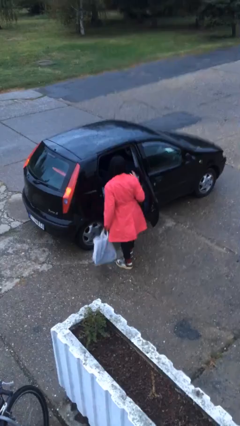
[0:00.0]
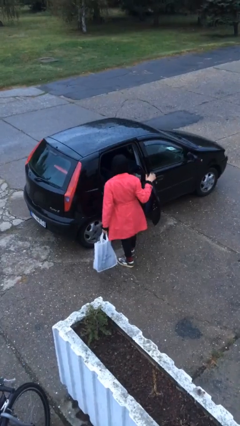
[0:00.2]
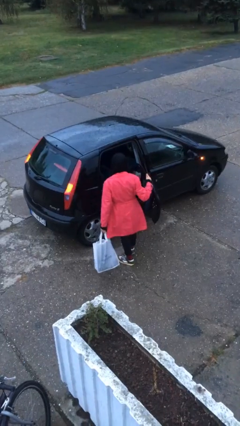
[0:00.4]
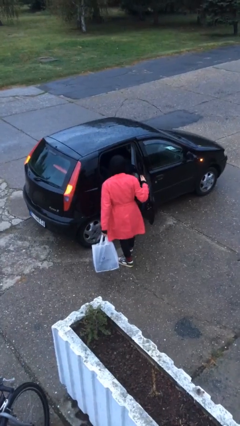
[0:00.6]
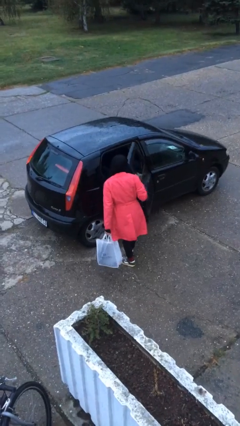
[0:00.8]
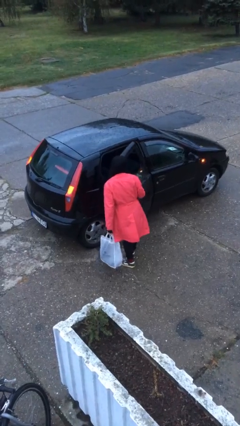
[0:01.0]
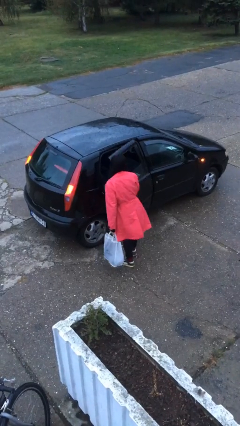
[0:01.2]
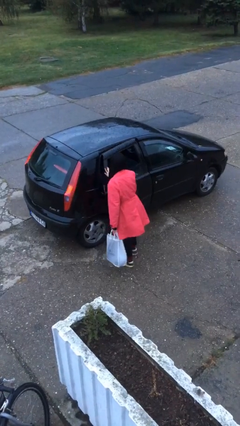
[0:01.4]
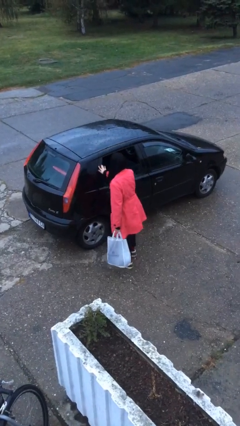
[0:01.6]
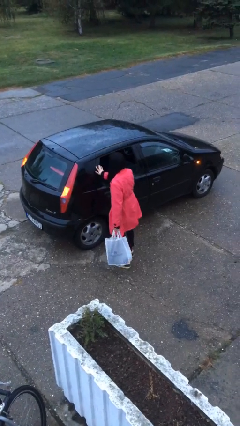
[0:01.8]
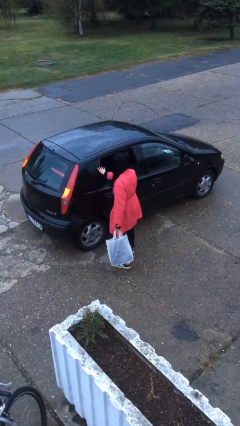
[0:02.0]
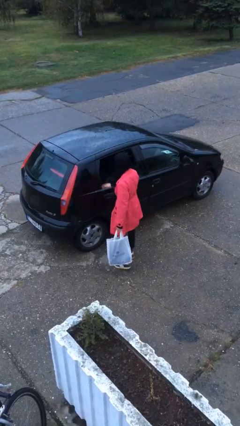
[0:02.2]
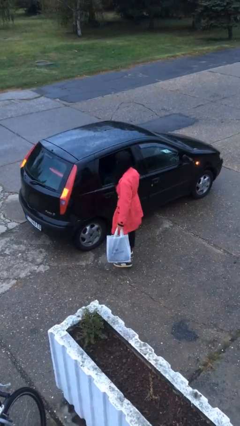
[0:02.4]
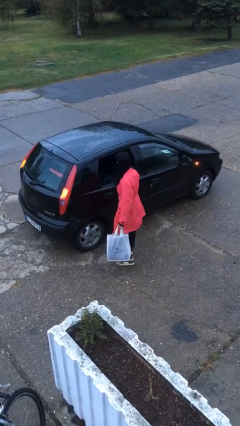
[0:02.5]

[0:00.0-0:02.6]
person closes car door

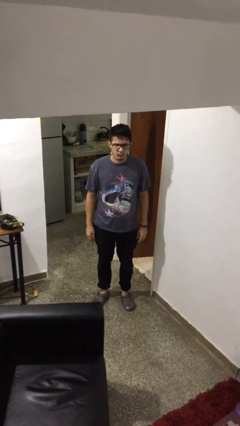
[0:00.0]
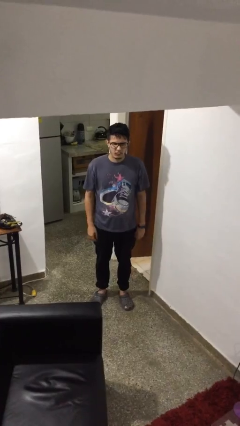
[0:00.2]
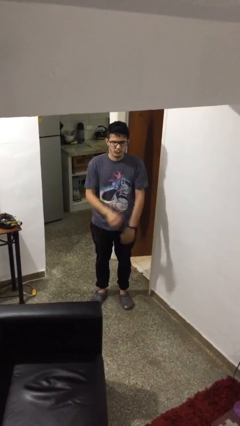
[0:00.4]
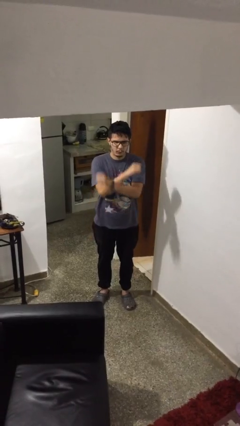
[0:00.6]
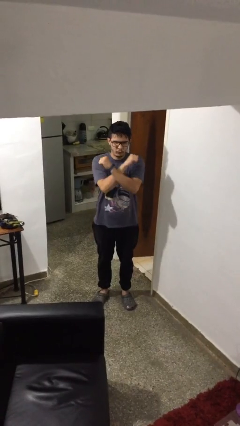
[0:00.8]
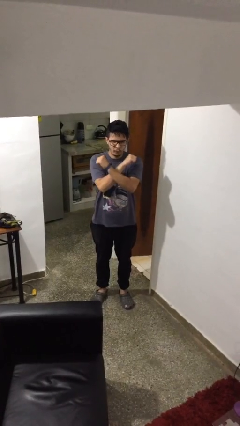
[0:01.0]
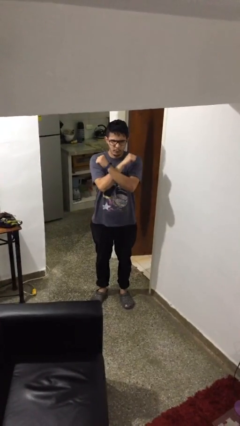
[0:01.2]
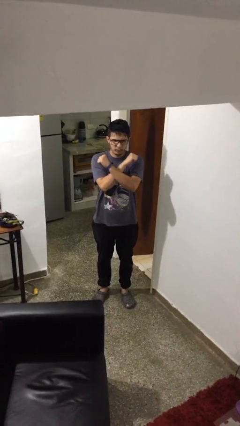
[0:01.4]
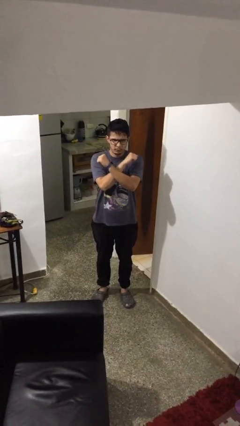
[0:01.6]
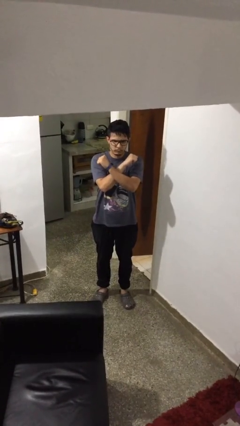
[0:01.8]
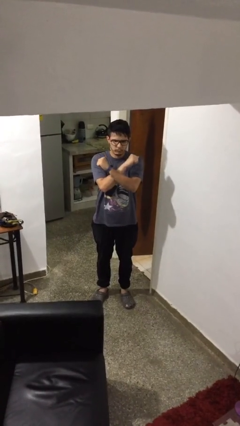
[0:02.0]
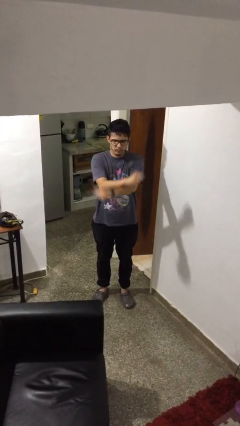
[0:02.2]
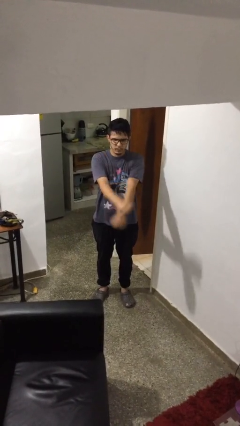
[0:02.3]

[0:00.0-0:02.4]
person gestures arms x

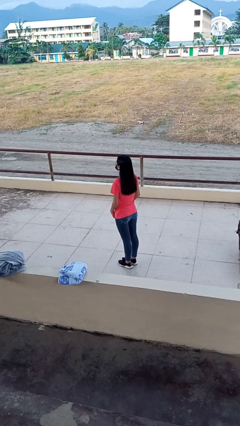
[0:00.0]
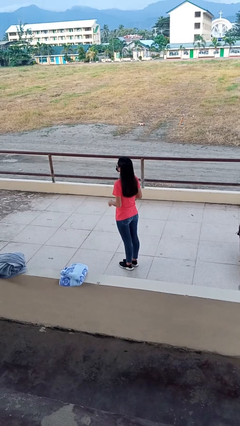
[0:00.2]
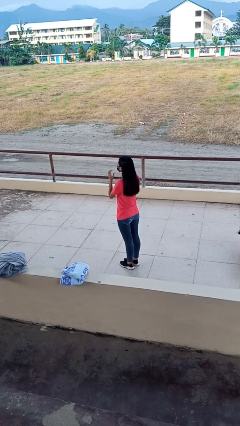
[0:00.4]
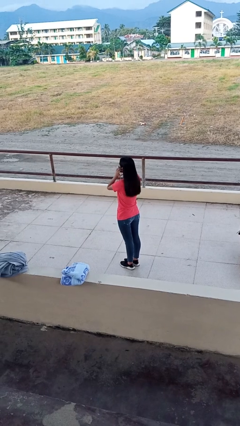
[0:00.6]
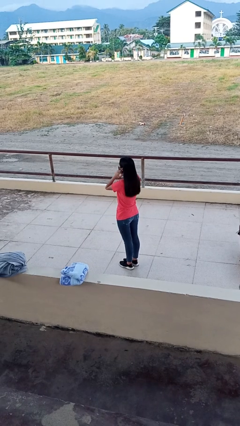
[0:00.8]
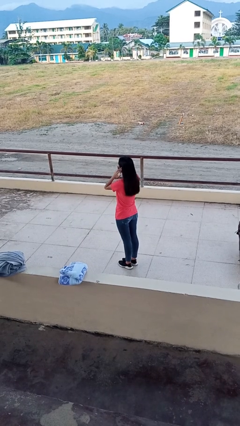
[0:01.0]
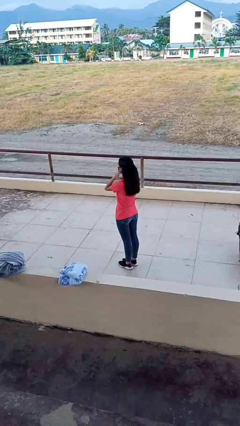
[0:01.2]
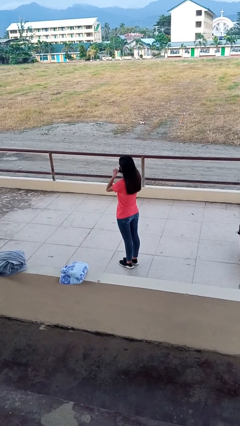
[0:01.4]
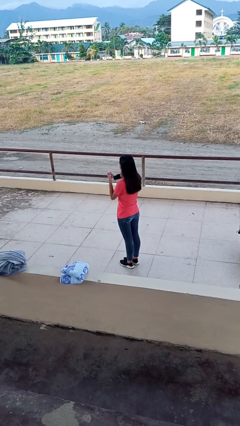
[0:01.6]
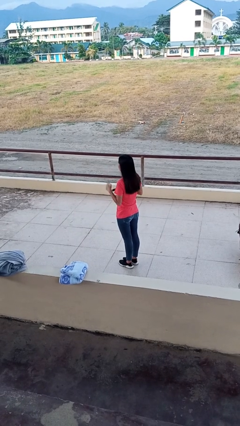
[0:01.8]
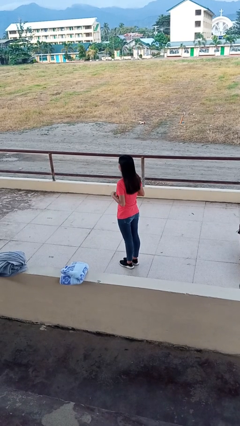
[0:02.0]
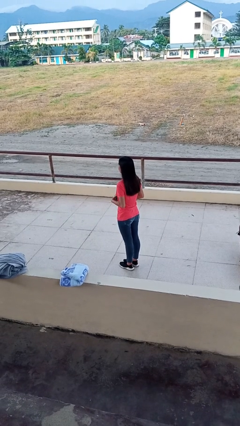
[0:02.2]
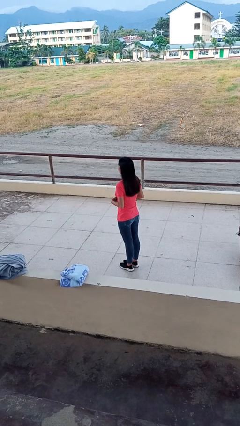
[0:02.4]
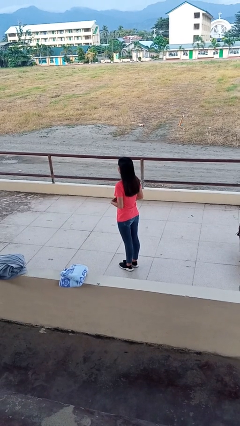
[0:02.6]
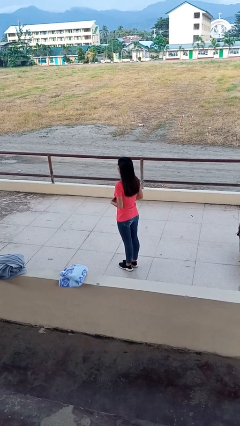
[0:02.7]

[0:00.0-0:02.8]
person takes off facemask

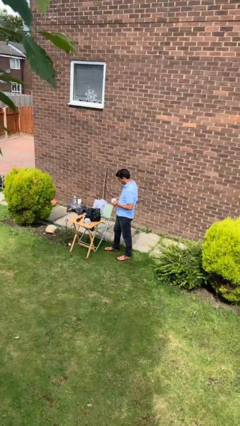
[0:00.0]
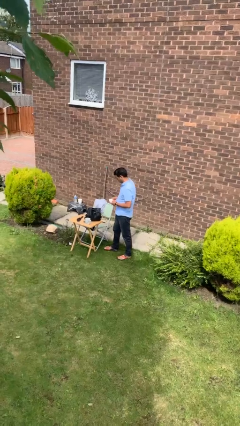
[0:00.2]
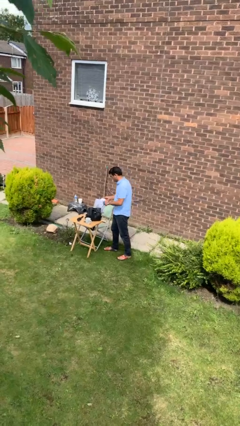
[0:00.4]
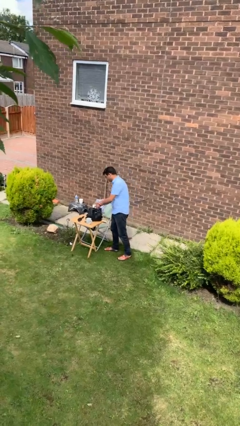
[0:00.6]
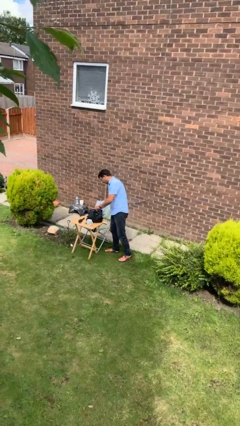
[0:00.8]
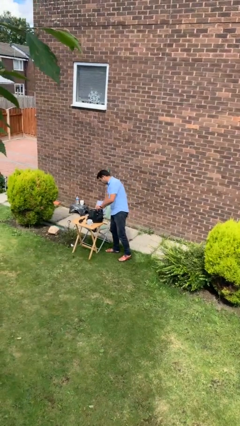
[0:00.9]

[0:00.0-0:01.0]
person puts object into backpack

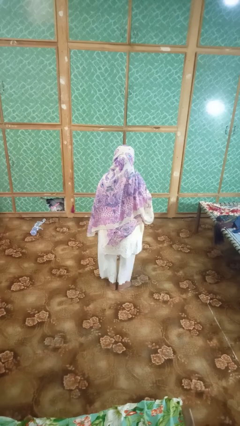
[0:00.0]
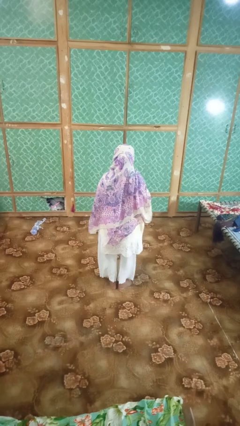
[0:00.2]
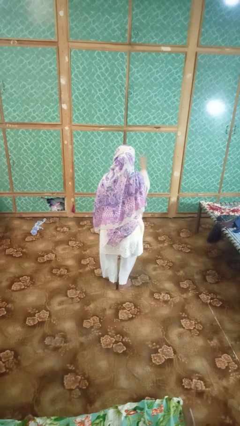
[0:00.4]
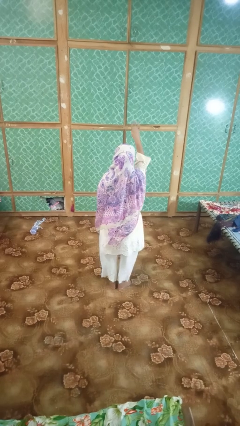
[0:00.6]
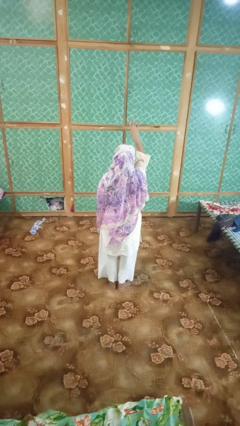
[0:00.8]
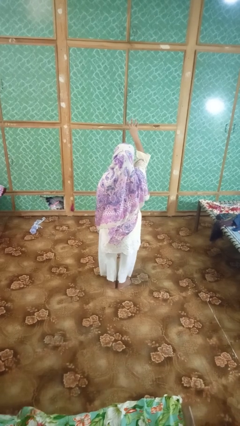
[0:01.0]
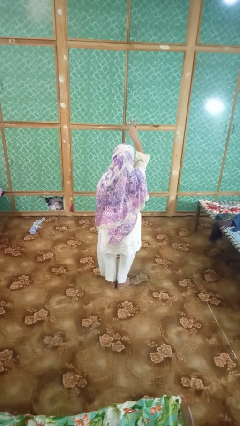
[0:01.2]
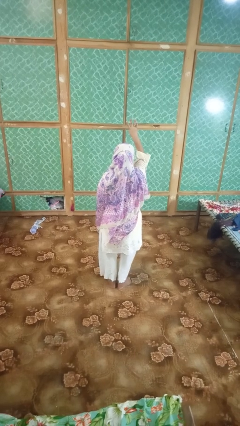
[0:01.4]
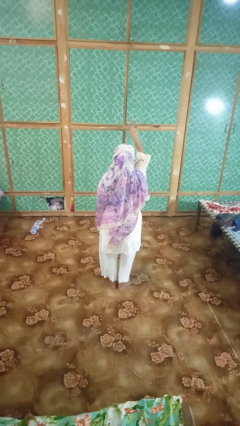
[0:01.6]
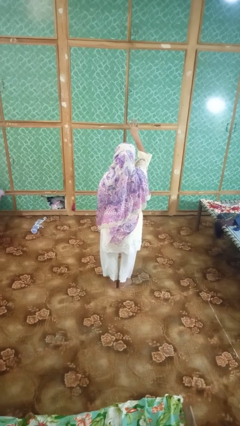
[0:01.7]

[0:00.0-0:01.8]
person gestures number four

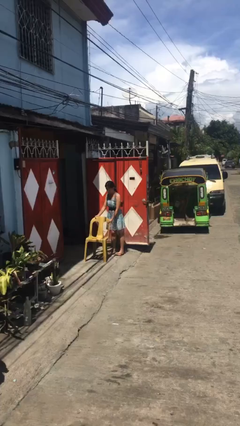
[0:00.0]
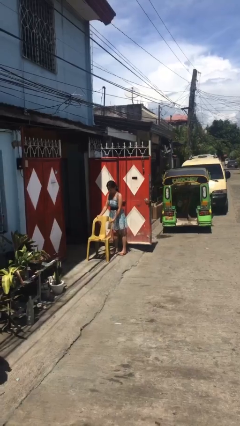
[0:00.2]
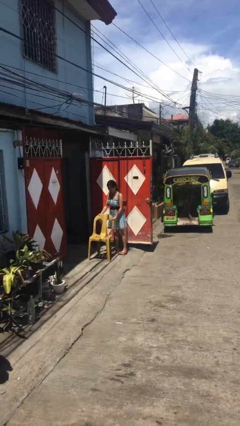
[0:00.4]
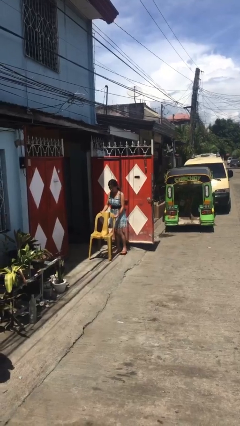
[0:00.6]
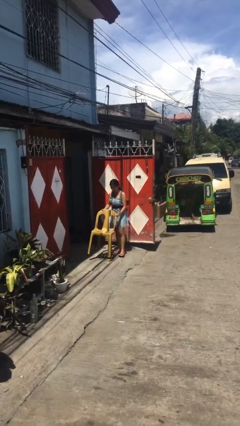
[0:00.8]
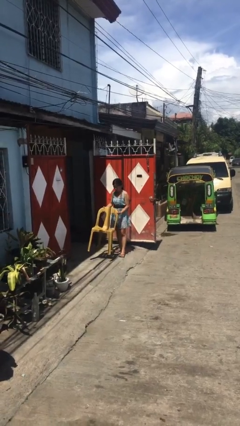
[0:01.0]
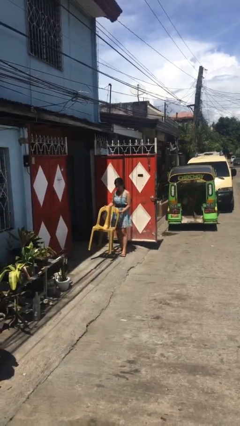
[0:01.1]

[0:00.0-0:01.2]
person picks up object from floor

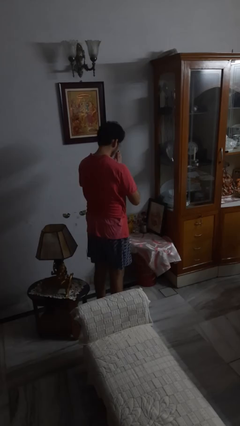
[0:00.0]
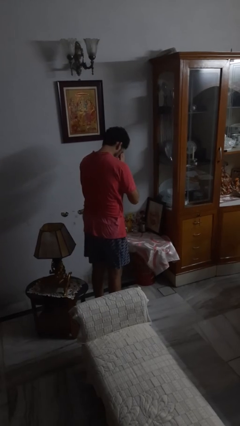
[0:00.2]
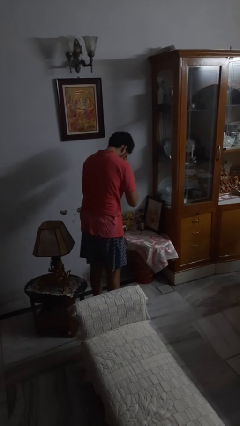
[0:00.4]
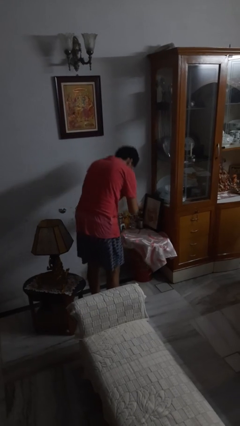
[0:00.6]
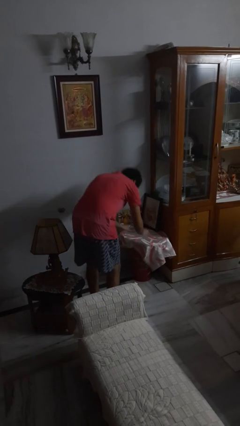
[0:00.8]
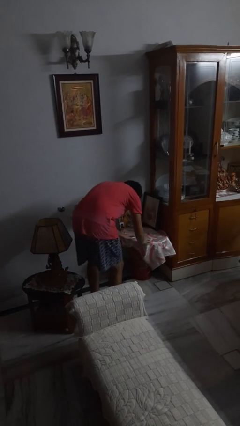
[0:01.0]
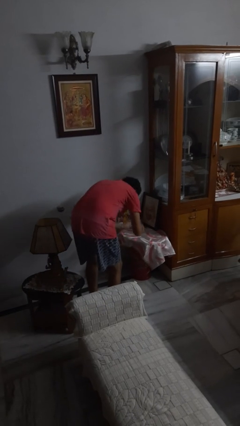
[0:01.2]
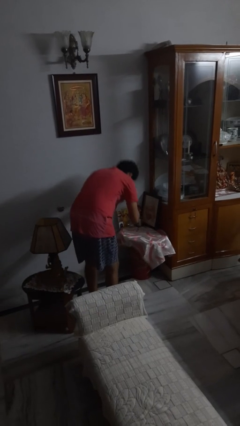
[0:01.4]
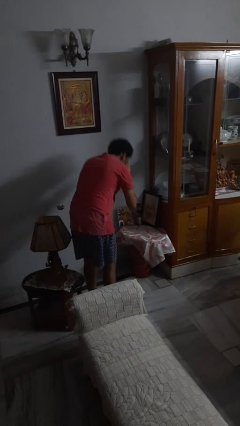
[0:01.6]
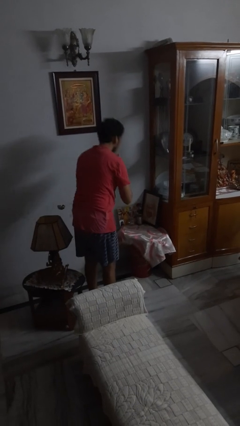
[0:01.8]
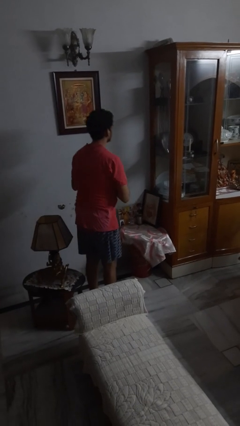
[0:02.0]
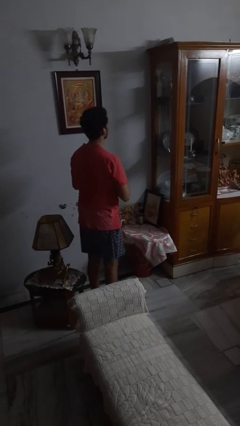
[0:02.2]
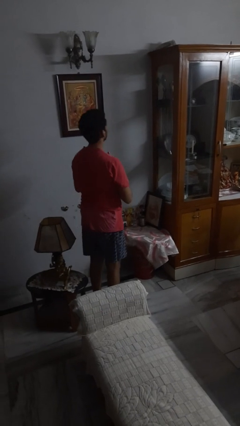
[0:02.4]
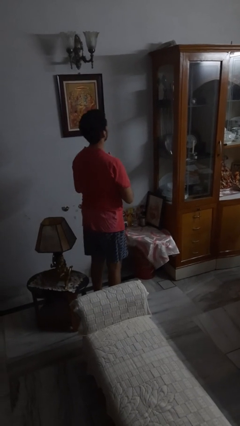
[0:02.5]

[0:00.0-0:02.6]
person prays

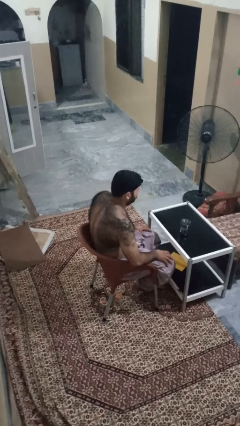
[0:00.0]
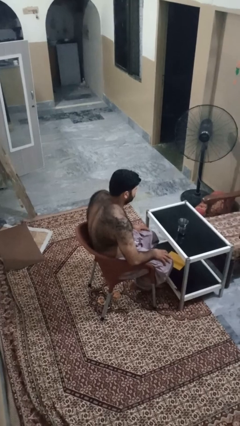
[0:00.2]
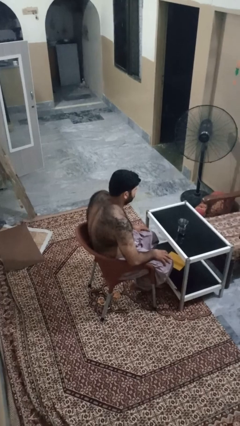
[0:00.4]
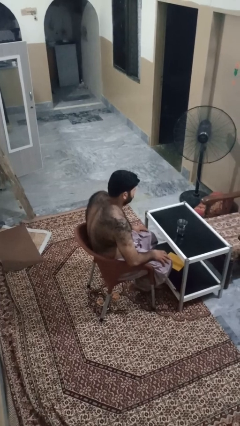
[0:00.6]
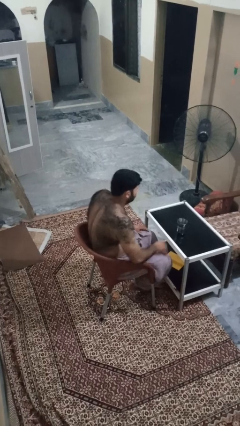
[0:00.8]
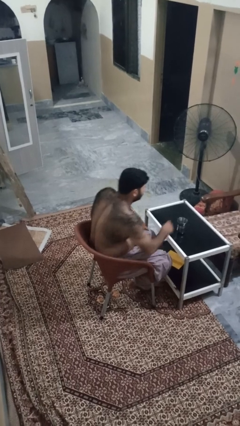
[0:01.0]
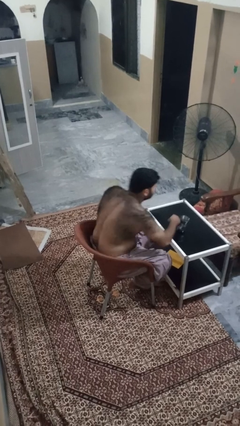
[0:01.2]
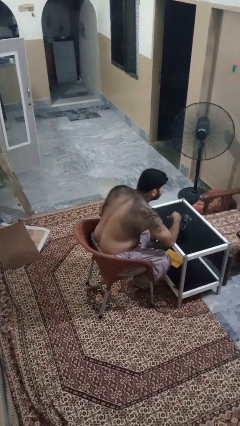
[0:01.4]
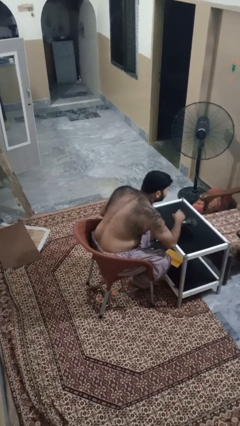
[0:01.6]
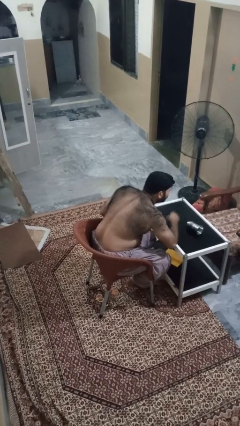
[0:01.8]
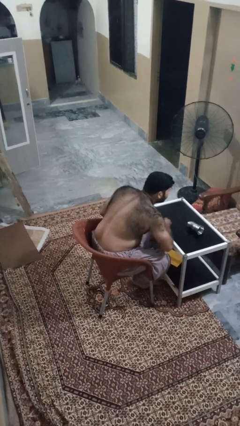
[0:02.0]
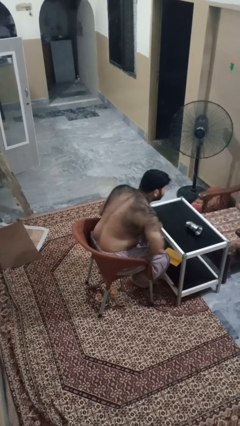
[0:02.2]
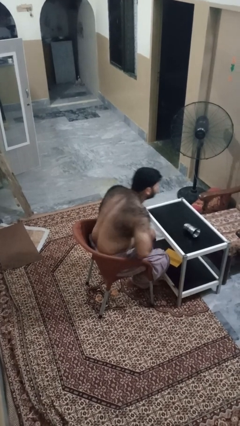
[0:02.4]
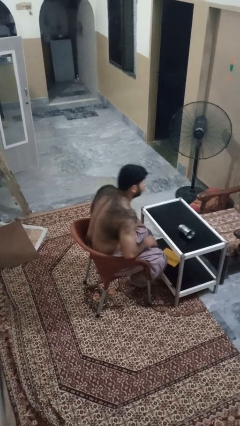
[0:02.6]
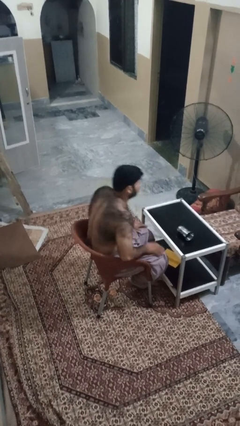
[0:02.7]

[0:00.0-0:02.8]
person knocks over glass
